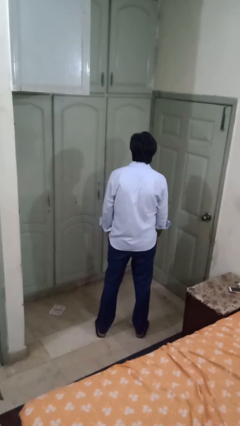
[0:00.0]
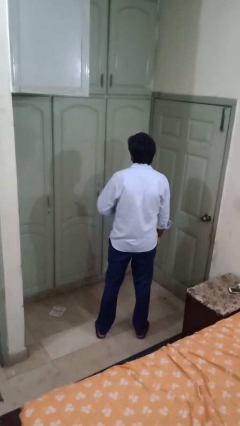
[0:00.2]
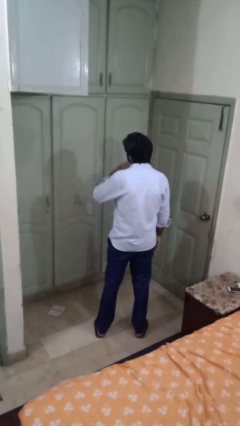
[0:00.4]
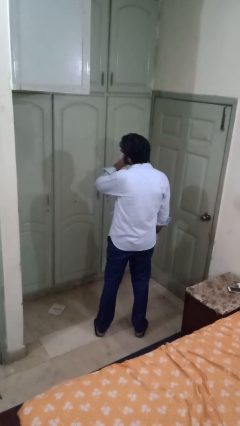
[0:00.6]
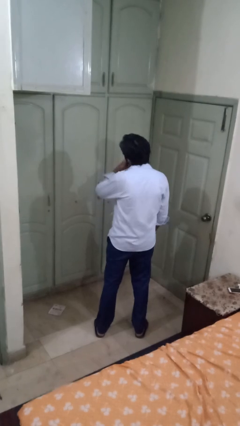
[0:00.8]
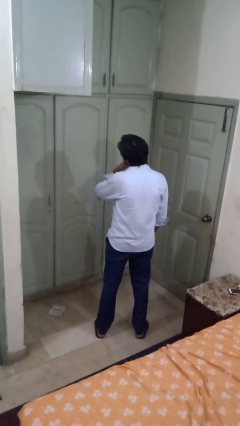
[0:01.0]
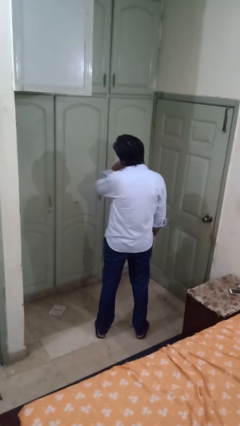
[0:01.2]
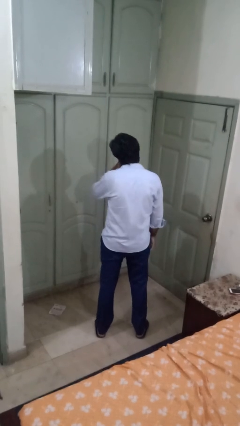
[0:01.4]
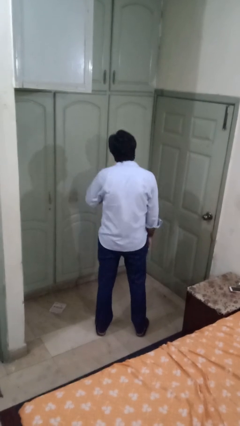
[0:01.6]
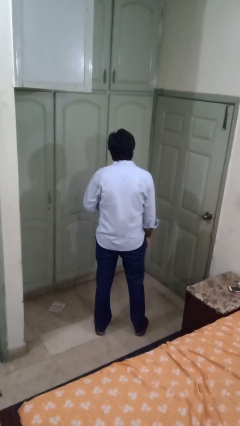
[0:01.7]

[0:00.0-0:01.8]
person strokes chin

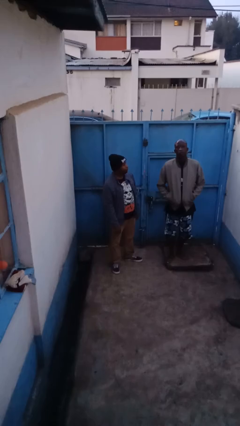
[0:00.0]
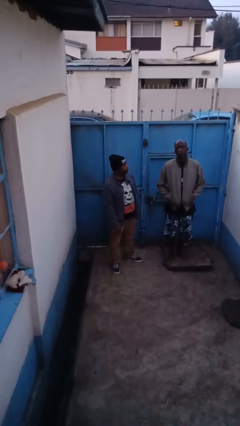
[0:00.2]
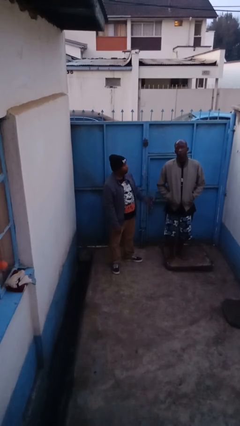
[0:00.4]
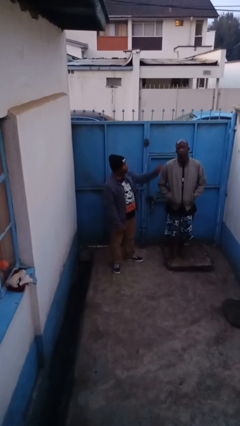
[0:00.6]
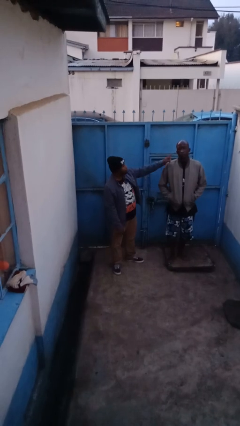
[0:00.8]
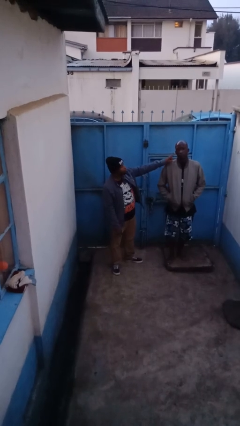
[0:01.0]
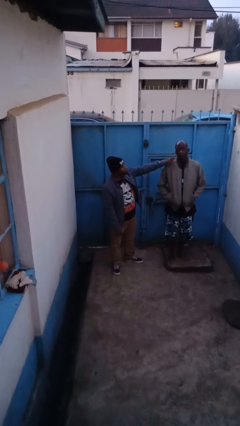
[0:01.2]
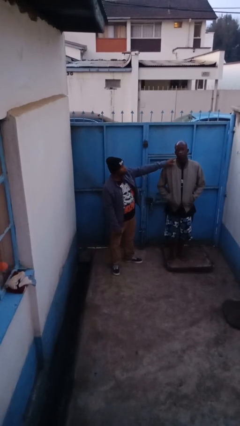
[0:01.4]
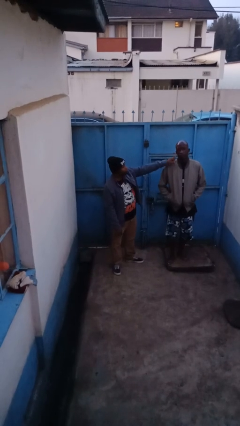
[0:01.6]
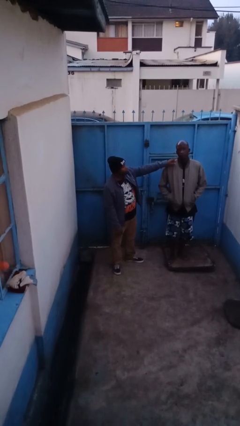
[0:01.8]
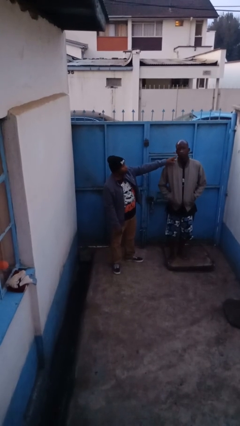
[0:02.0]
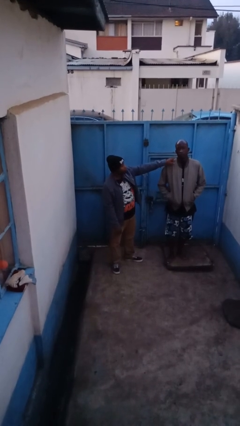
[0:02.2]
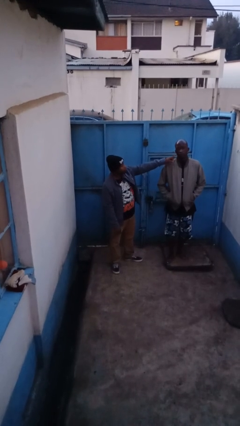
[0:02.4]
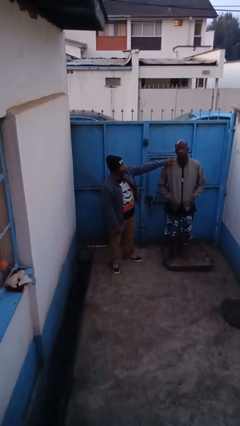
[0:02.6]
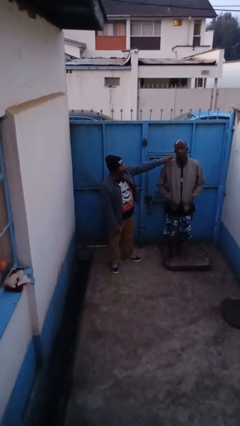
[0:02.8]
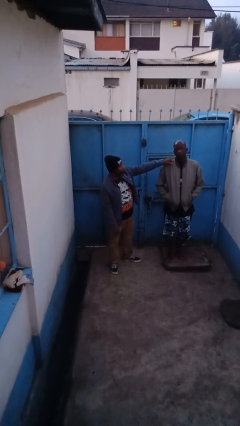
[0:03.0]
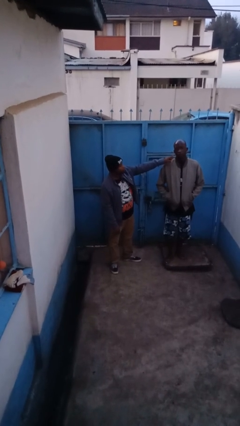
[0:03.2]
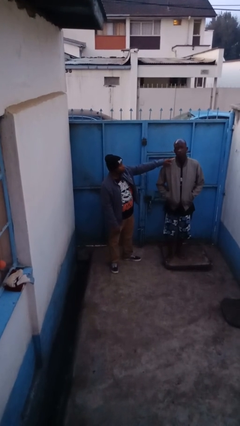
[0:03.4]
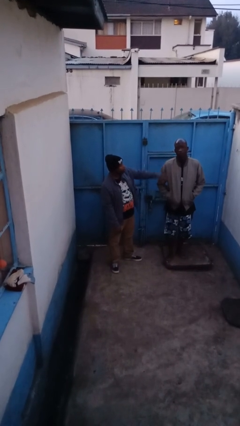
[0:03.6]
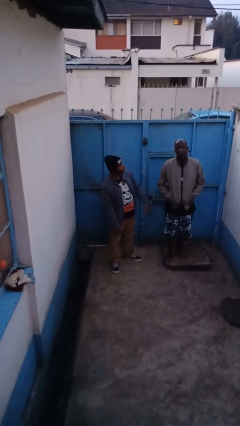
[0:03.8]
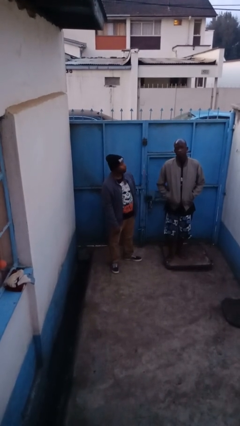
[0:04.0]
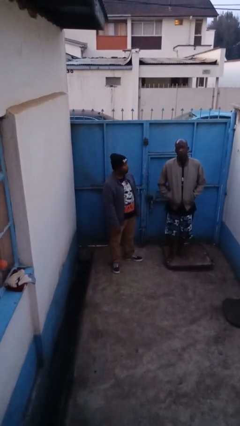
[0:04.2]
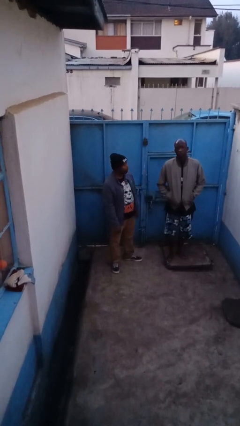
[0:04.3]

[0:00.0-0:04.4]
person touches face of person

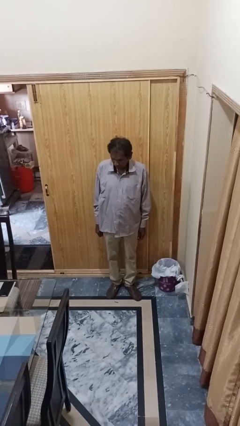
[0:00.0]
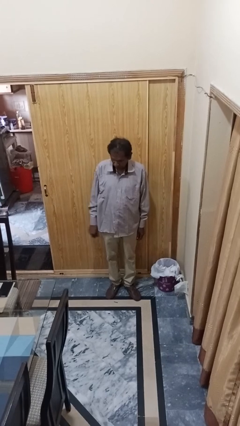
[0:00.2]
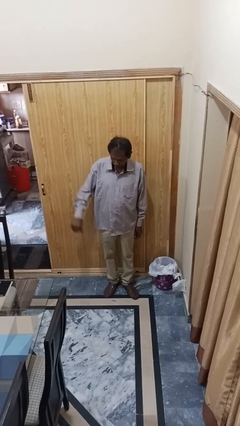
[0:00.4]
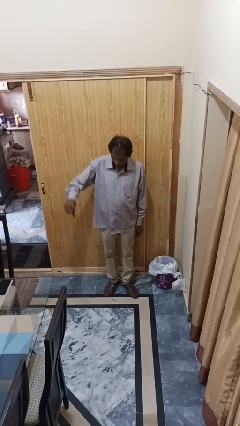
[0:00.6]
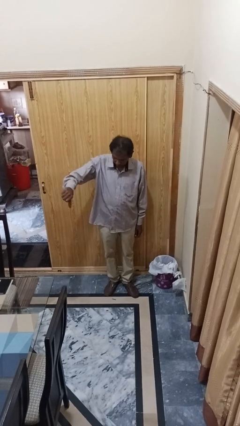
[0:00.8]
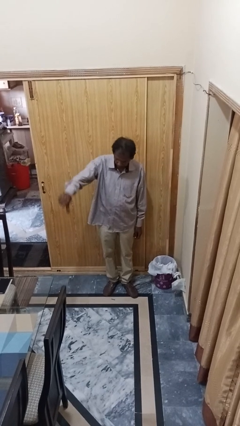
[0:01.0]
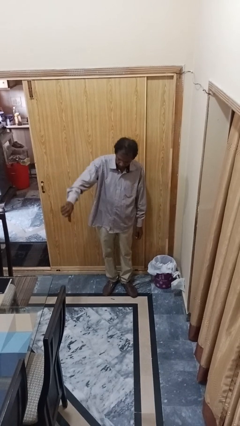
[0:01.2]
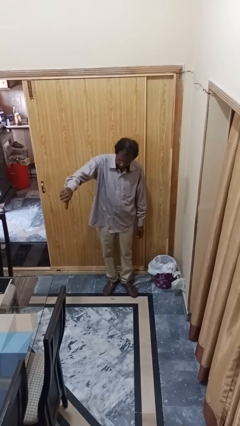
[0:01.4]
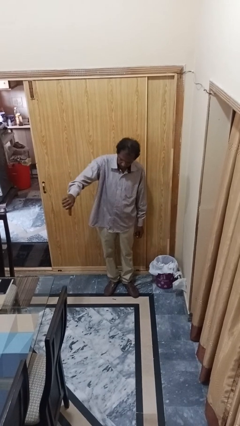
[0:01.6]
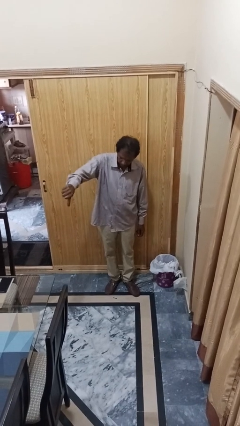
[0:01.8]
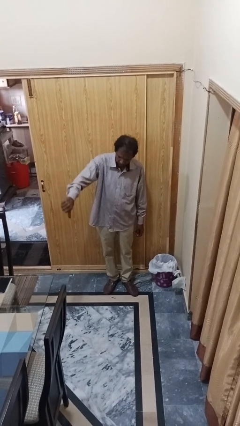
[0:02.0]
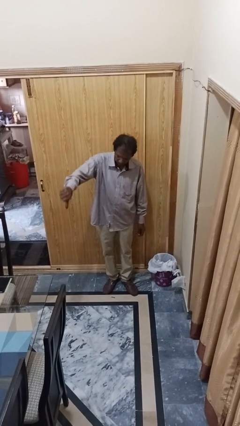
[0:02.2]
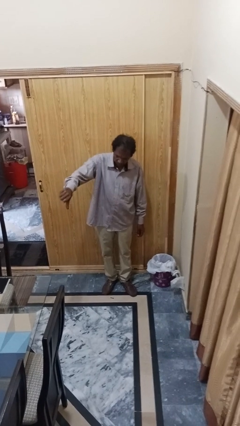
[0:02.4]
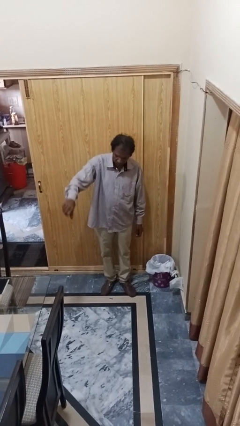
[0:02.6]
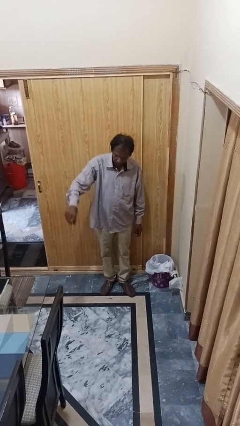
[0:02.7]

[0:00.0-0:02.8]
person gestures thumbs down

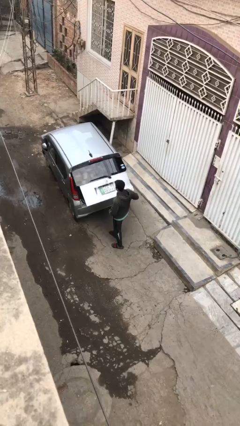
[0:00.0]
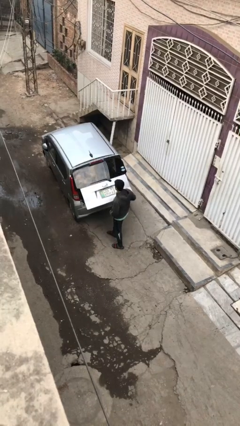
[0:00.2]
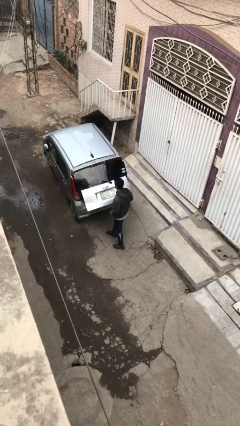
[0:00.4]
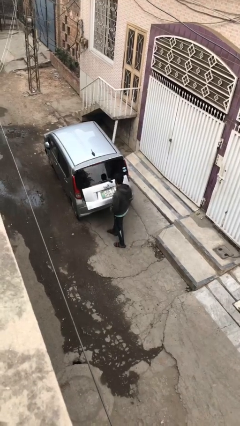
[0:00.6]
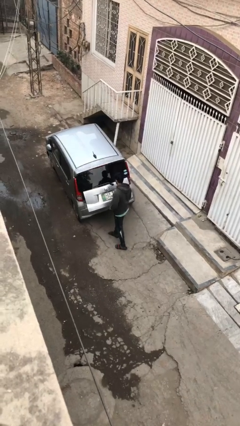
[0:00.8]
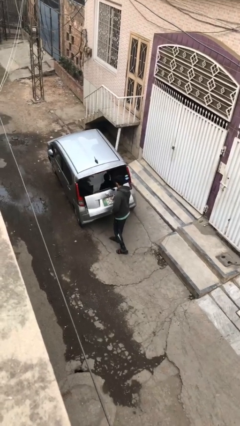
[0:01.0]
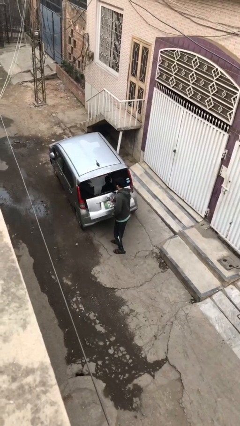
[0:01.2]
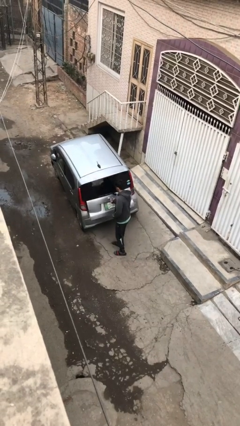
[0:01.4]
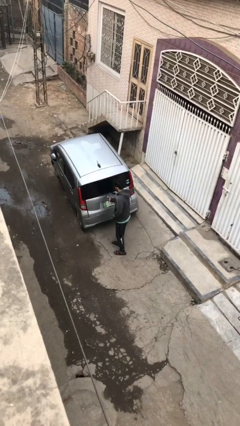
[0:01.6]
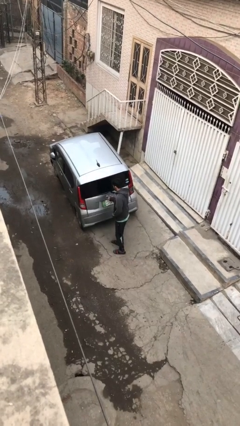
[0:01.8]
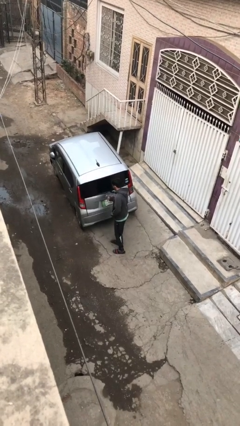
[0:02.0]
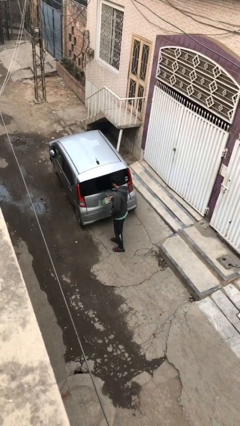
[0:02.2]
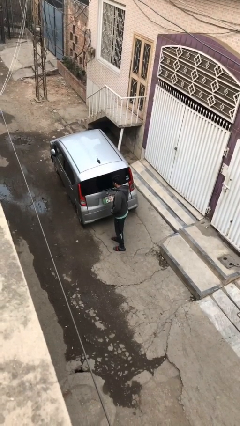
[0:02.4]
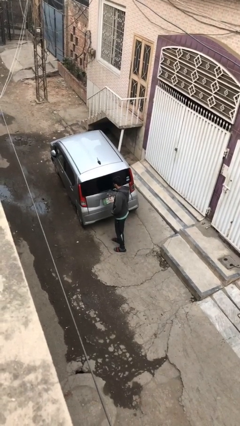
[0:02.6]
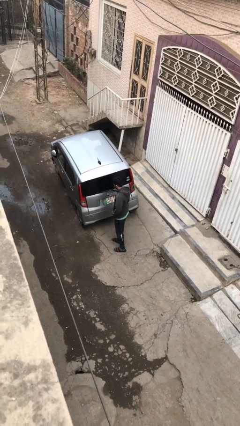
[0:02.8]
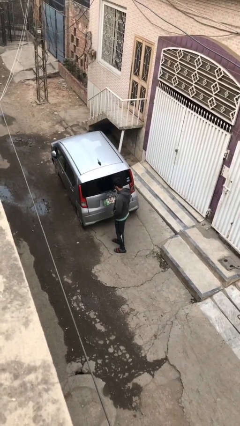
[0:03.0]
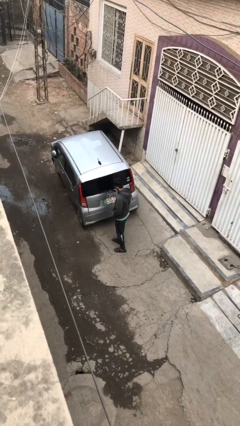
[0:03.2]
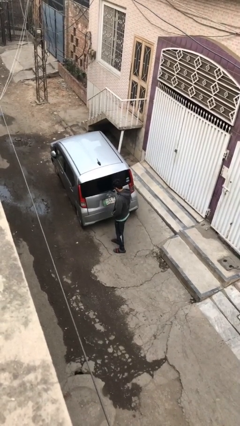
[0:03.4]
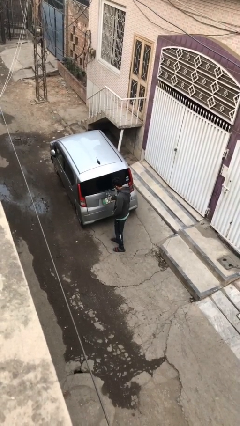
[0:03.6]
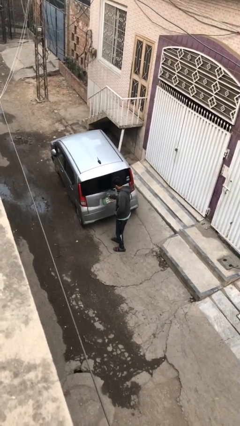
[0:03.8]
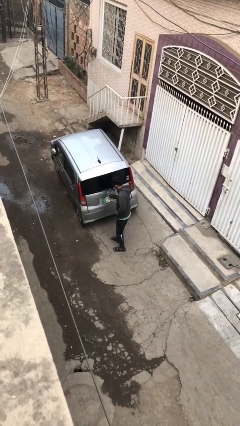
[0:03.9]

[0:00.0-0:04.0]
person closes car trunk

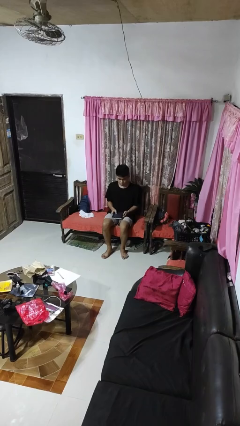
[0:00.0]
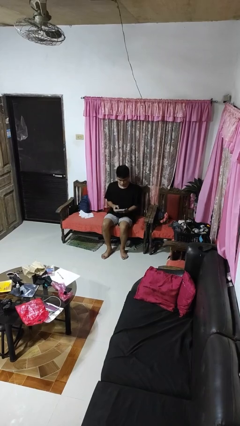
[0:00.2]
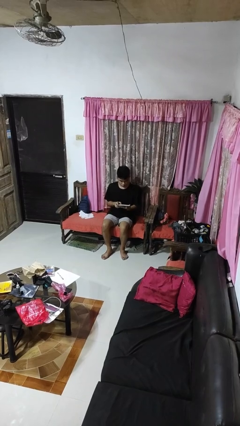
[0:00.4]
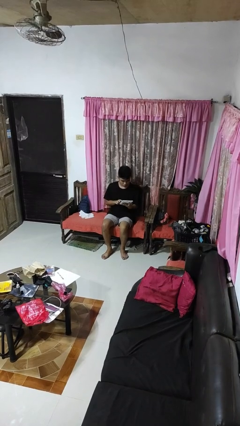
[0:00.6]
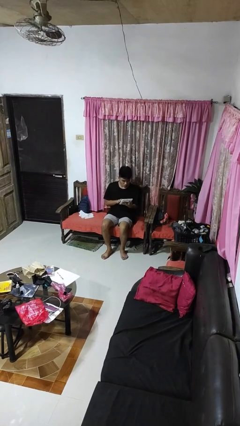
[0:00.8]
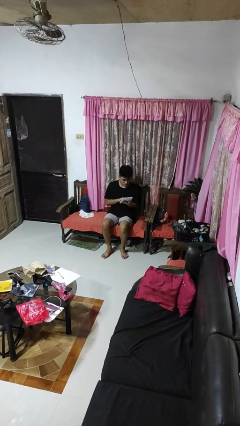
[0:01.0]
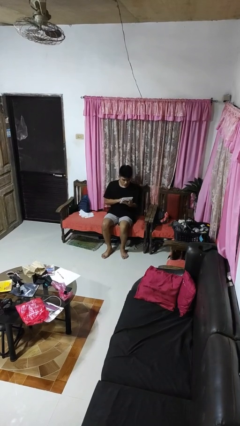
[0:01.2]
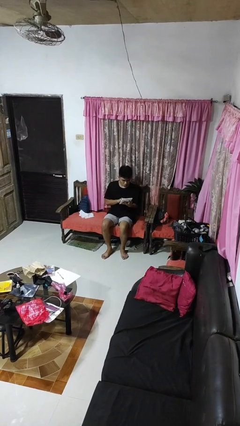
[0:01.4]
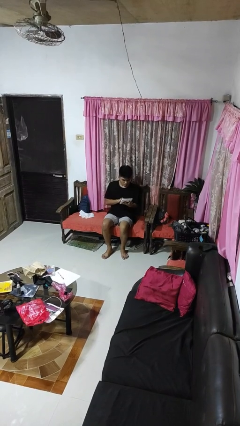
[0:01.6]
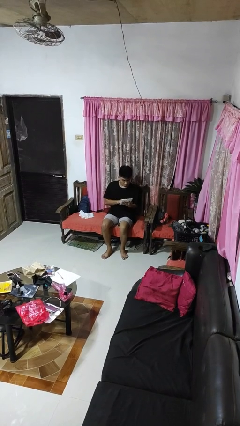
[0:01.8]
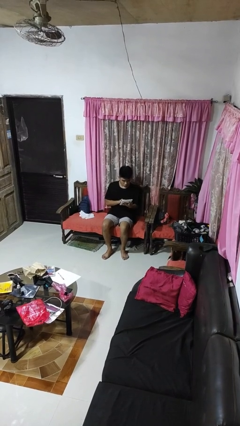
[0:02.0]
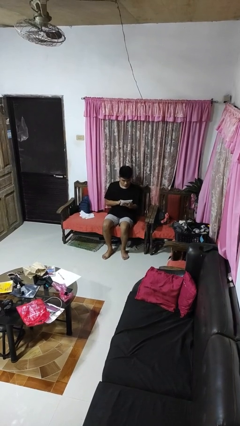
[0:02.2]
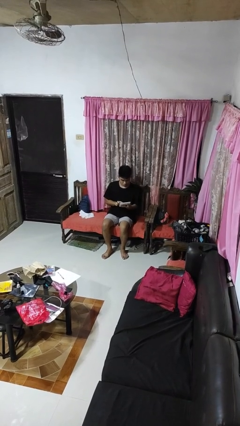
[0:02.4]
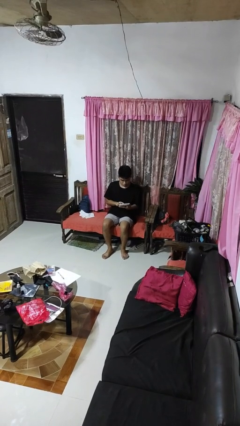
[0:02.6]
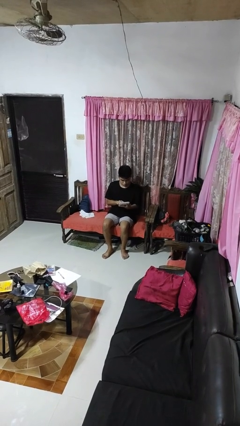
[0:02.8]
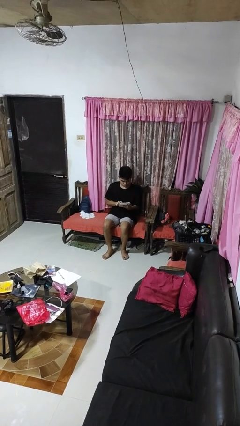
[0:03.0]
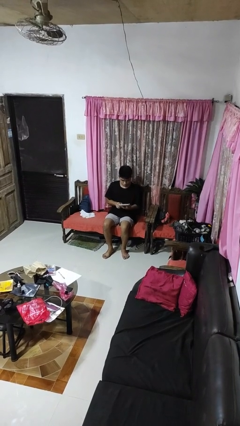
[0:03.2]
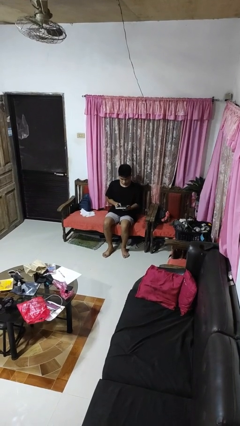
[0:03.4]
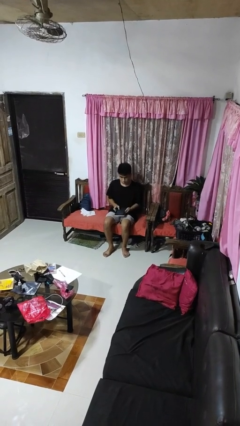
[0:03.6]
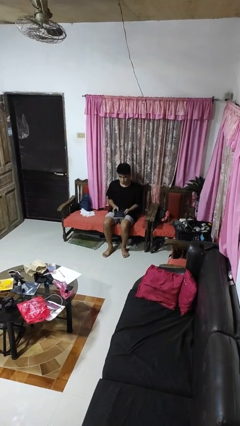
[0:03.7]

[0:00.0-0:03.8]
person interacts with tablet

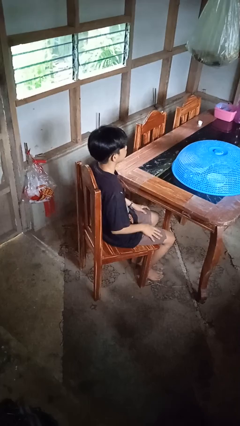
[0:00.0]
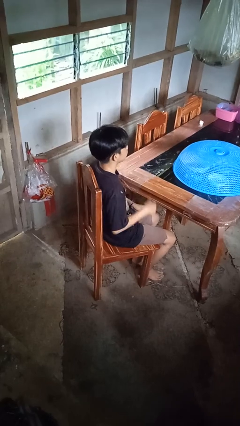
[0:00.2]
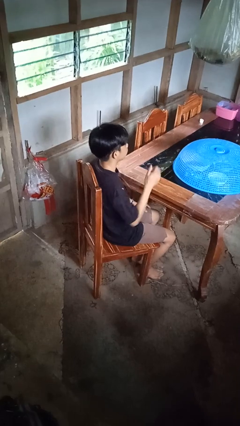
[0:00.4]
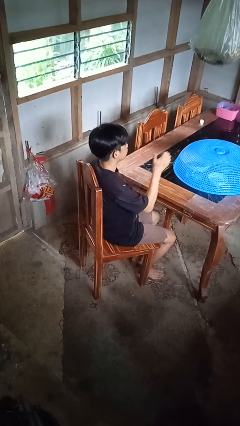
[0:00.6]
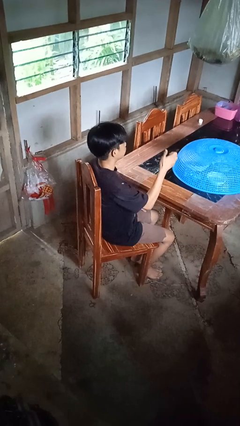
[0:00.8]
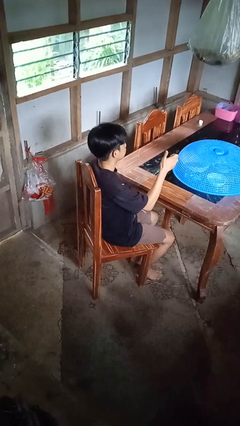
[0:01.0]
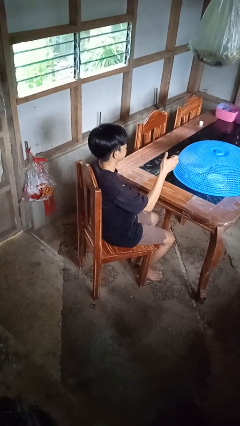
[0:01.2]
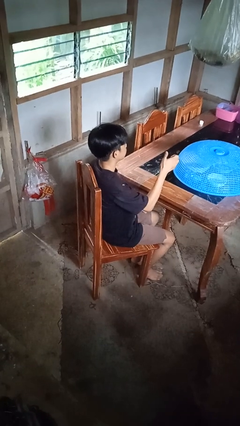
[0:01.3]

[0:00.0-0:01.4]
person gestures thumbs up
